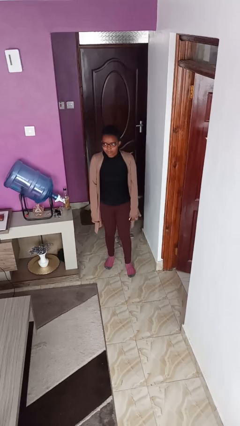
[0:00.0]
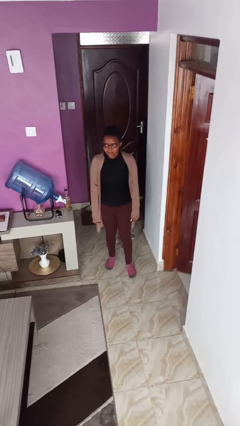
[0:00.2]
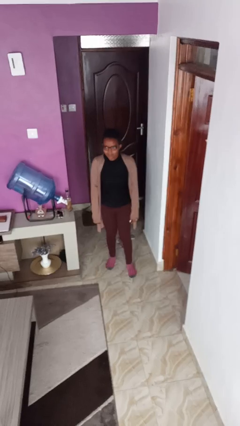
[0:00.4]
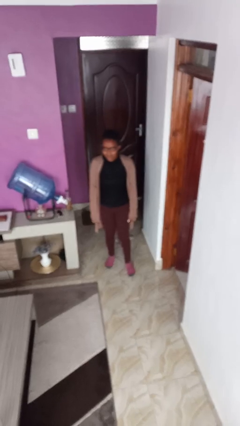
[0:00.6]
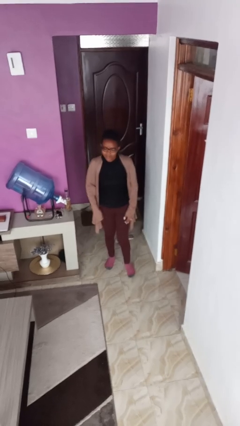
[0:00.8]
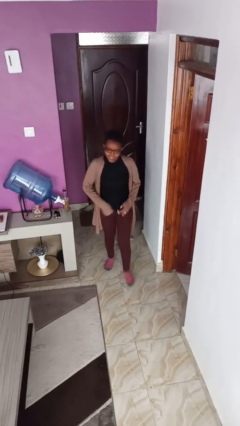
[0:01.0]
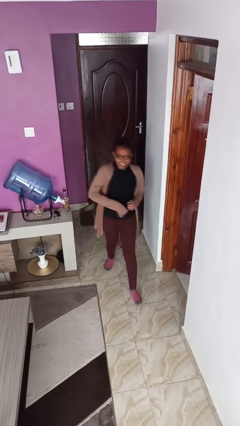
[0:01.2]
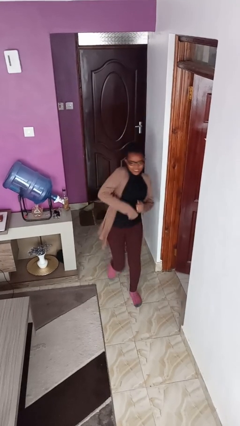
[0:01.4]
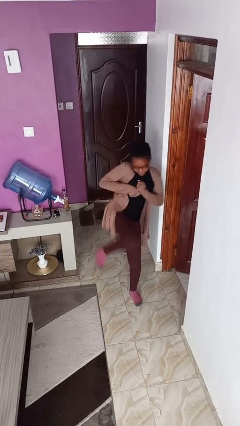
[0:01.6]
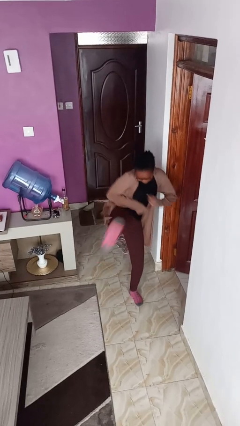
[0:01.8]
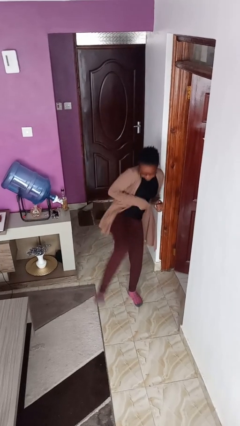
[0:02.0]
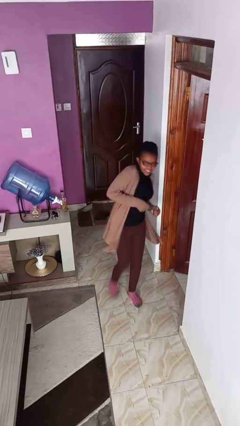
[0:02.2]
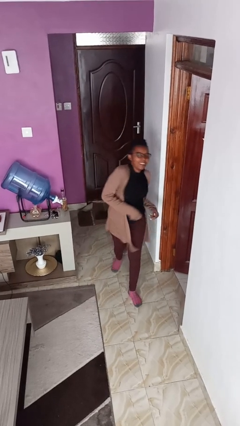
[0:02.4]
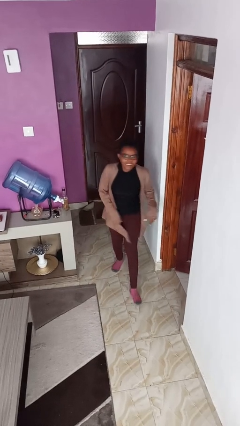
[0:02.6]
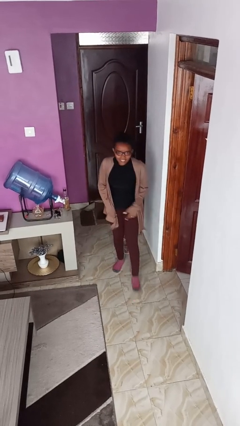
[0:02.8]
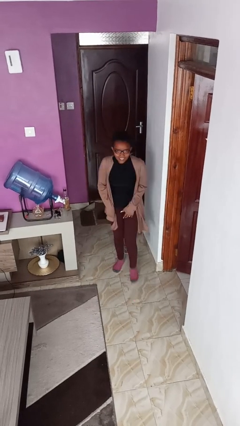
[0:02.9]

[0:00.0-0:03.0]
person karate kicks

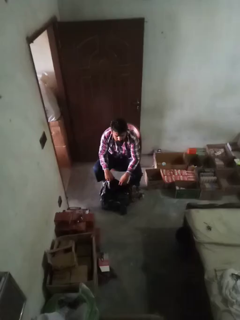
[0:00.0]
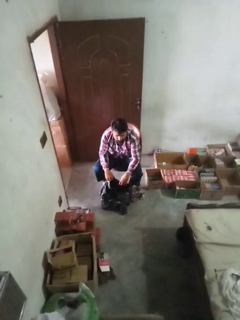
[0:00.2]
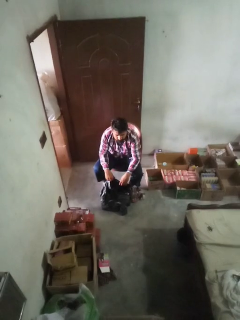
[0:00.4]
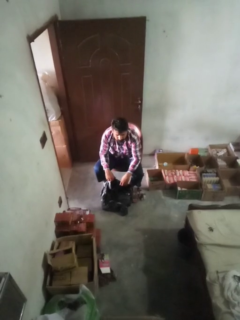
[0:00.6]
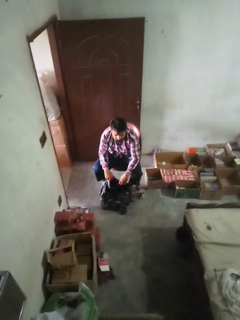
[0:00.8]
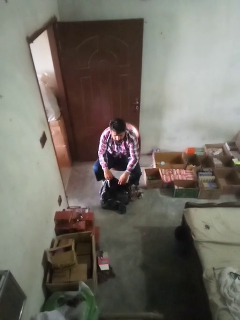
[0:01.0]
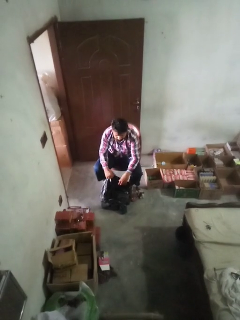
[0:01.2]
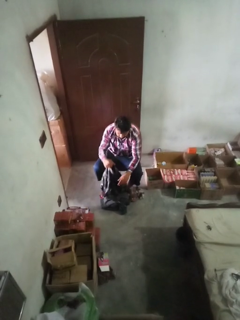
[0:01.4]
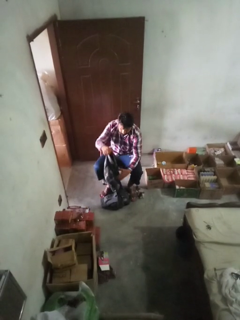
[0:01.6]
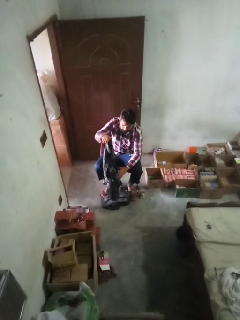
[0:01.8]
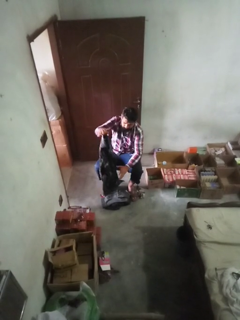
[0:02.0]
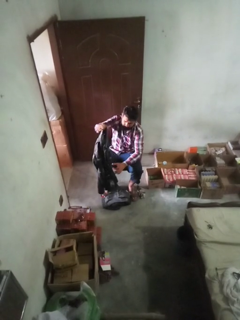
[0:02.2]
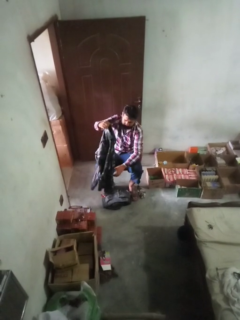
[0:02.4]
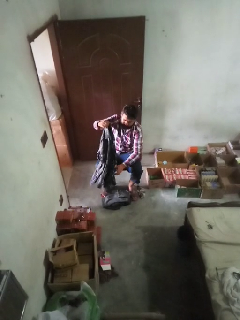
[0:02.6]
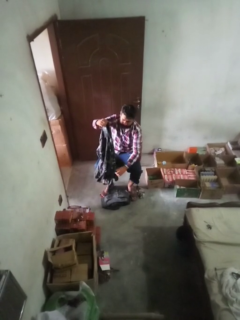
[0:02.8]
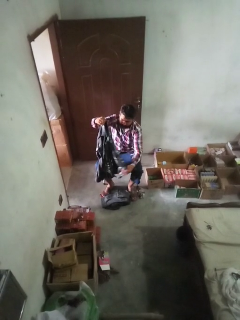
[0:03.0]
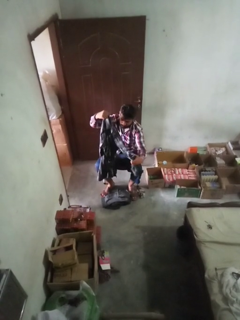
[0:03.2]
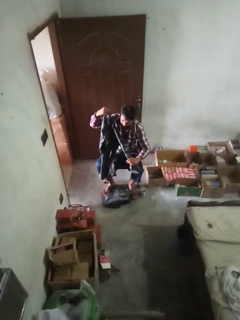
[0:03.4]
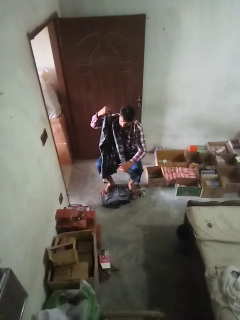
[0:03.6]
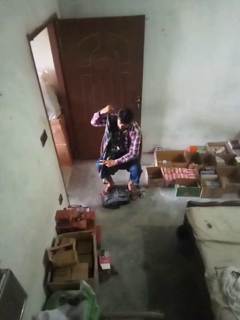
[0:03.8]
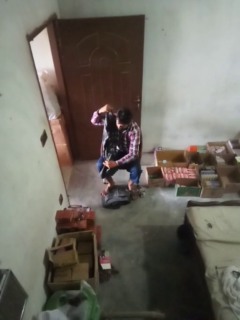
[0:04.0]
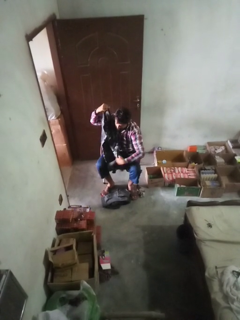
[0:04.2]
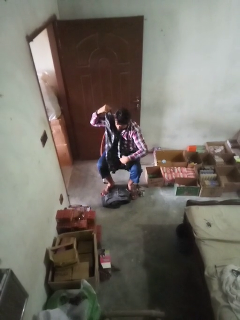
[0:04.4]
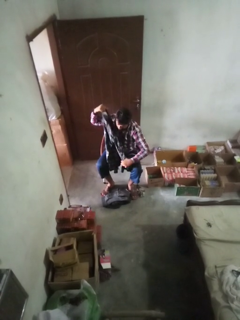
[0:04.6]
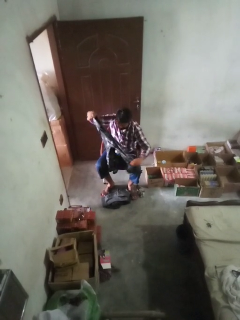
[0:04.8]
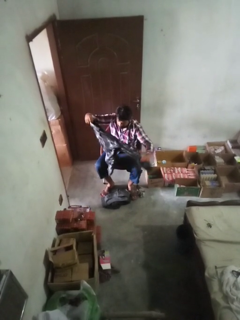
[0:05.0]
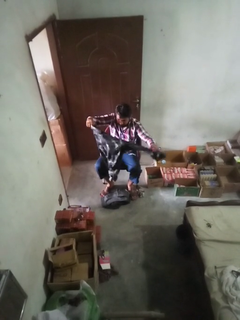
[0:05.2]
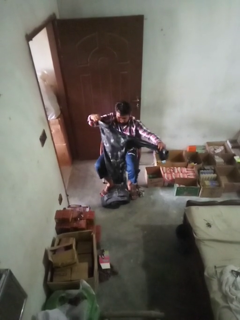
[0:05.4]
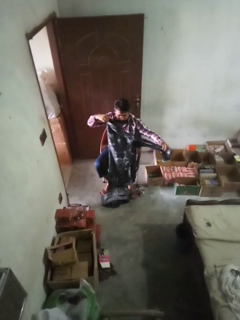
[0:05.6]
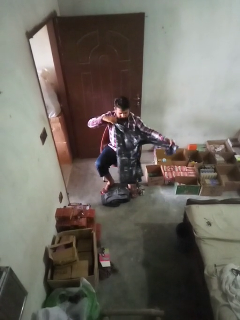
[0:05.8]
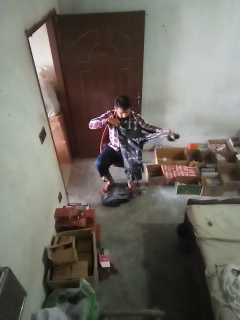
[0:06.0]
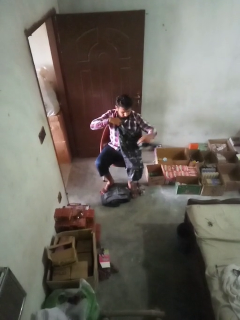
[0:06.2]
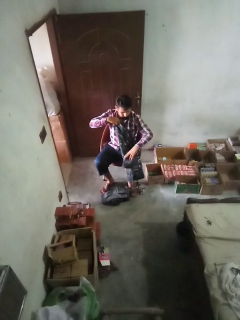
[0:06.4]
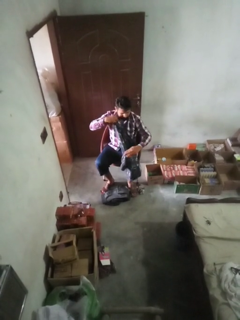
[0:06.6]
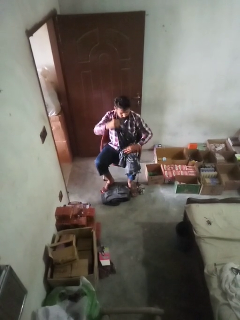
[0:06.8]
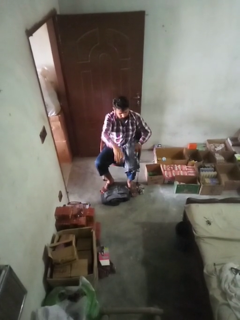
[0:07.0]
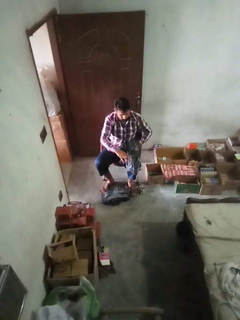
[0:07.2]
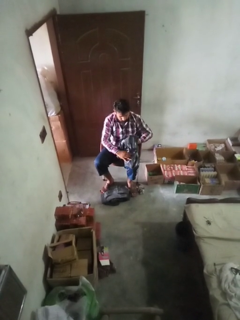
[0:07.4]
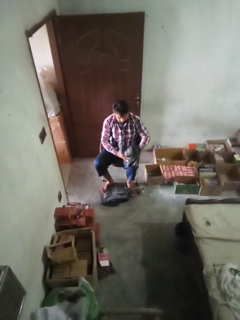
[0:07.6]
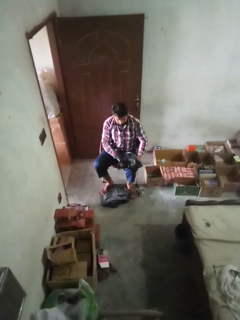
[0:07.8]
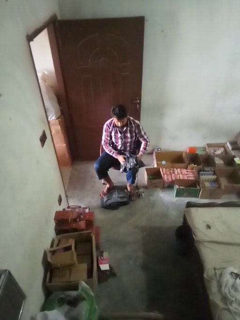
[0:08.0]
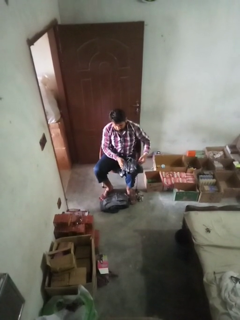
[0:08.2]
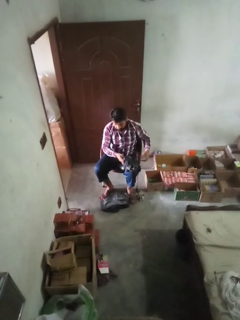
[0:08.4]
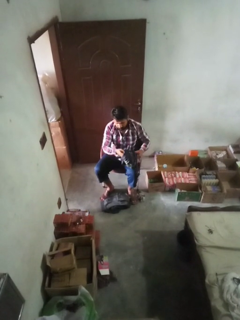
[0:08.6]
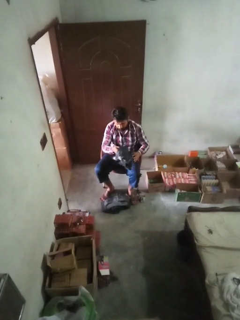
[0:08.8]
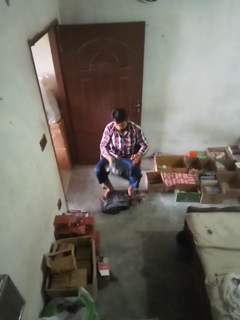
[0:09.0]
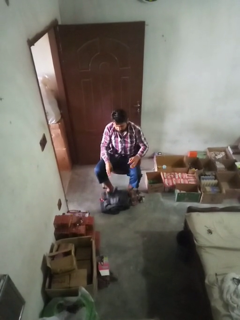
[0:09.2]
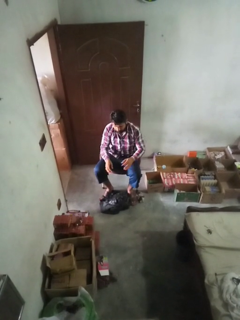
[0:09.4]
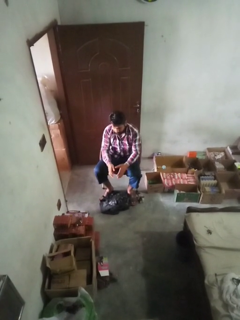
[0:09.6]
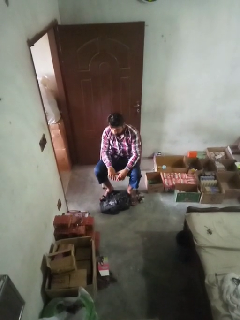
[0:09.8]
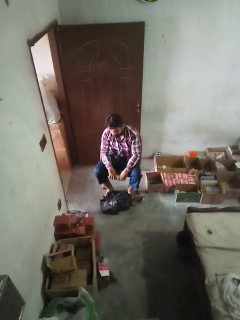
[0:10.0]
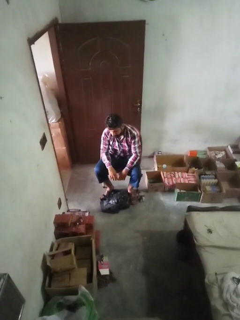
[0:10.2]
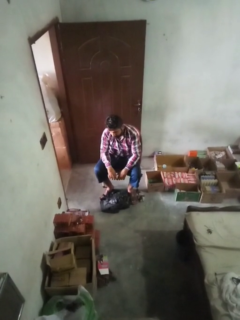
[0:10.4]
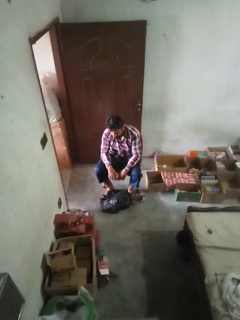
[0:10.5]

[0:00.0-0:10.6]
person folds shirt

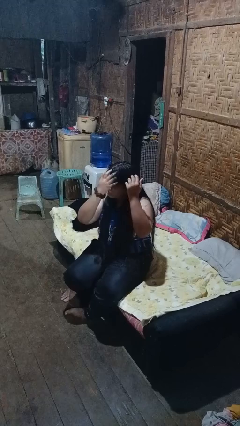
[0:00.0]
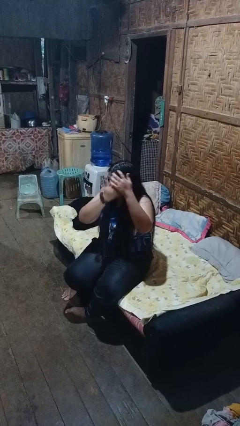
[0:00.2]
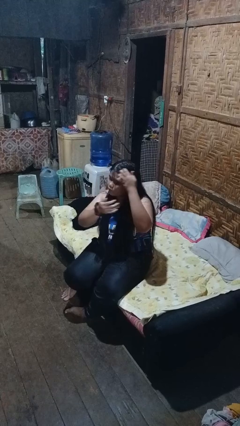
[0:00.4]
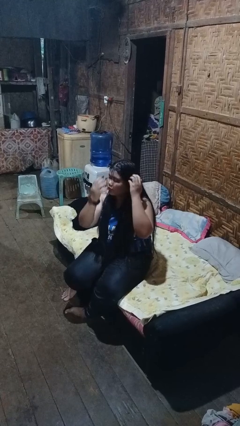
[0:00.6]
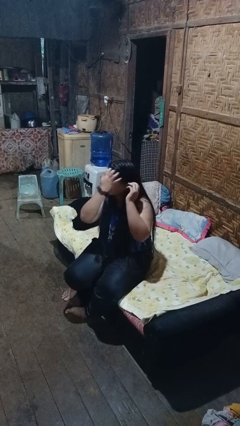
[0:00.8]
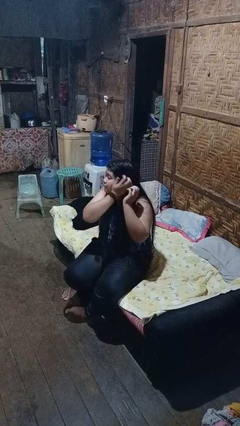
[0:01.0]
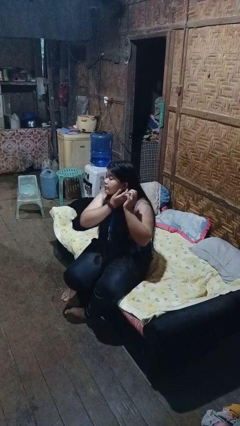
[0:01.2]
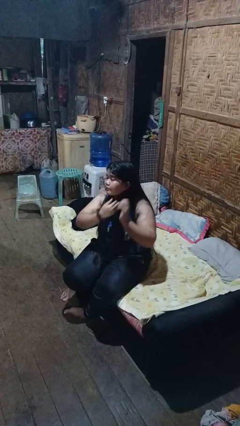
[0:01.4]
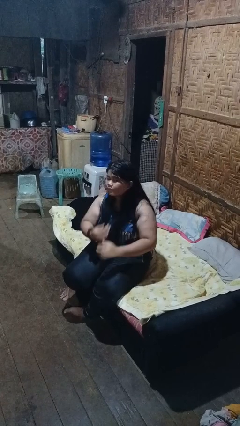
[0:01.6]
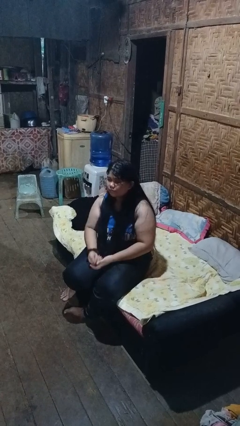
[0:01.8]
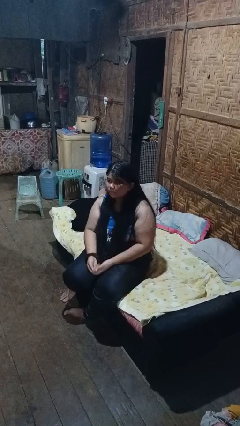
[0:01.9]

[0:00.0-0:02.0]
person strokes hair

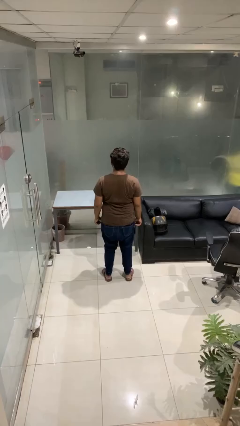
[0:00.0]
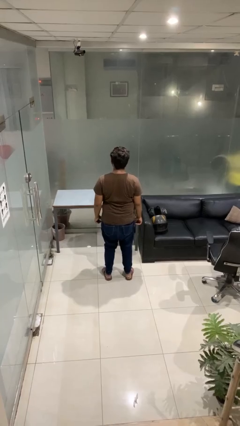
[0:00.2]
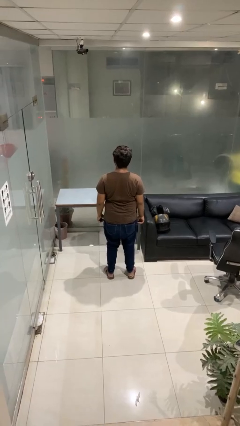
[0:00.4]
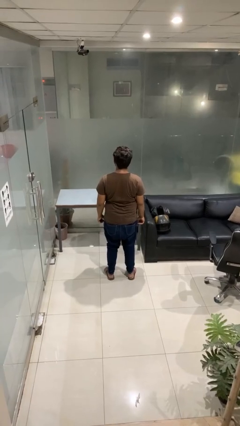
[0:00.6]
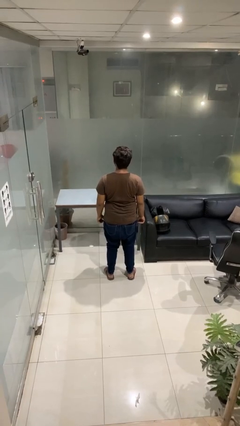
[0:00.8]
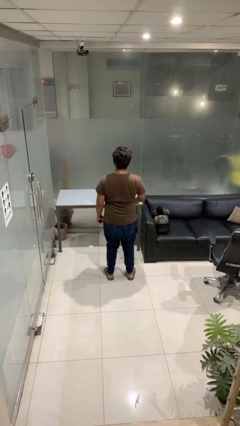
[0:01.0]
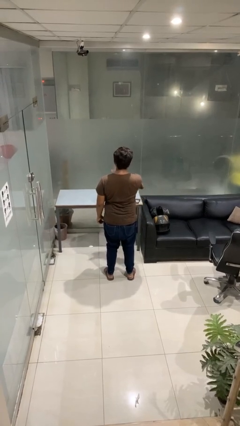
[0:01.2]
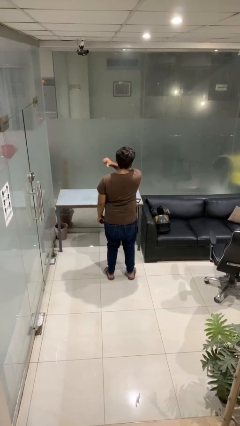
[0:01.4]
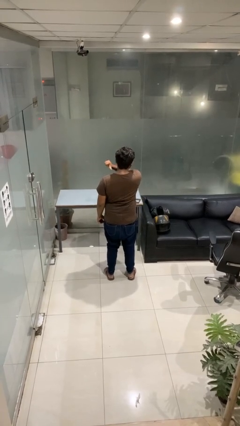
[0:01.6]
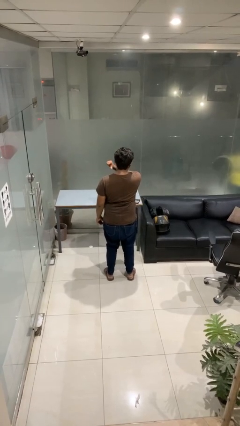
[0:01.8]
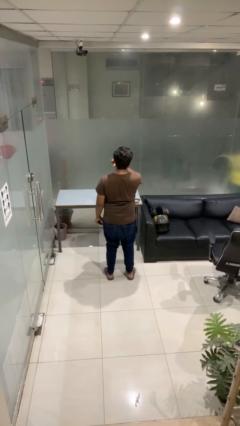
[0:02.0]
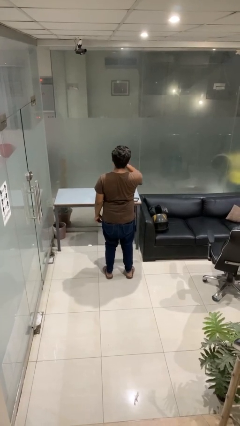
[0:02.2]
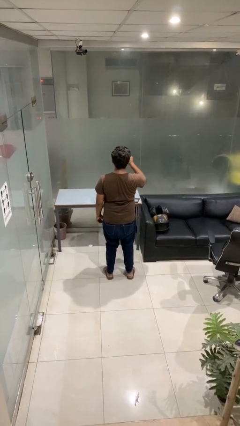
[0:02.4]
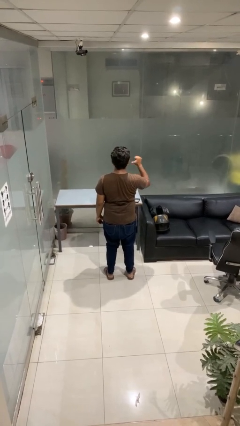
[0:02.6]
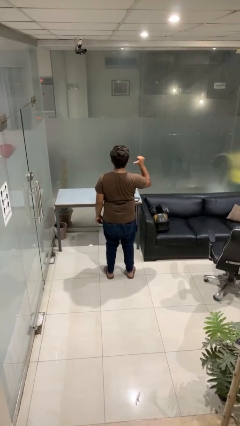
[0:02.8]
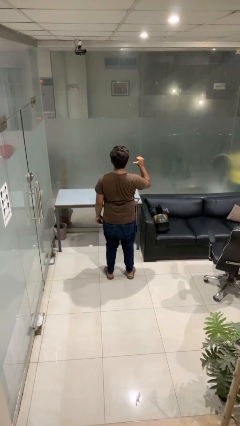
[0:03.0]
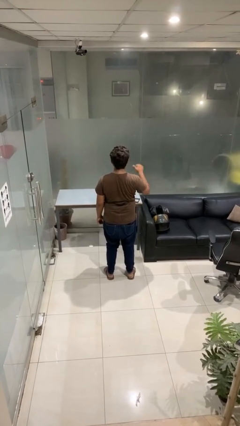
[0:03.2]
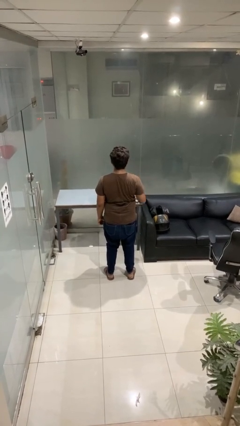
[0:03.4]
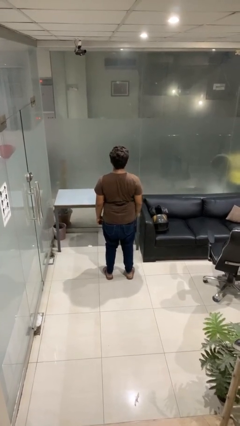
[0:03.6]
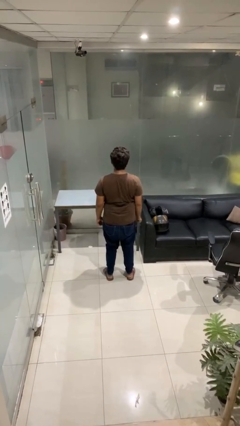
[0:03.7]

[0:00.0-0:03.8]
person gestures cut

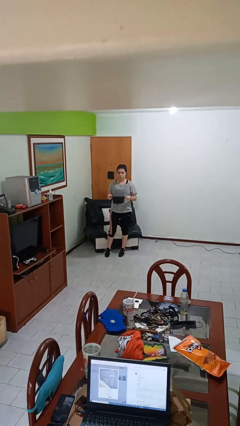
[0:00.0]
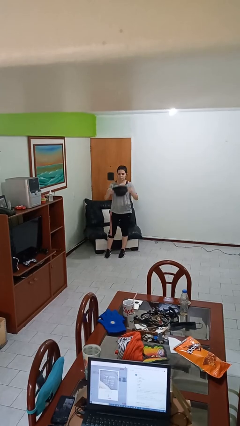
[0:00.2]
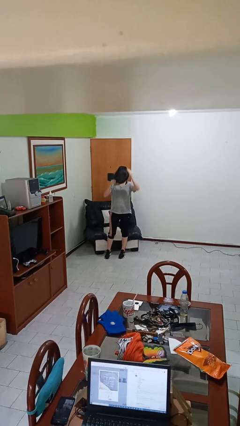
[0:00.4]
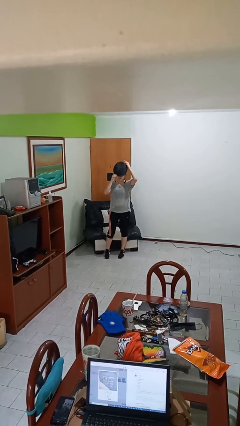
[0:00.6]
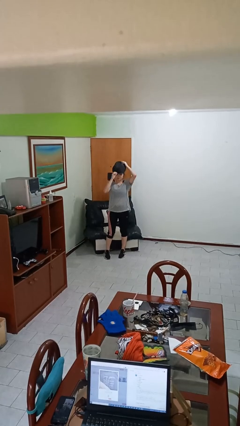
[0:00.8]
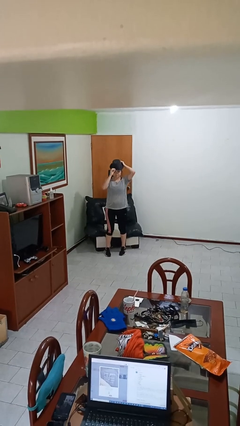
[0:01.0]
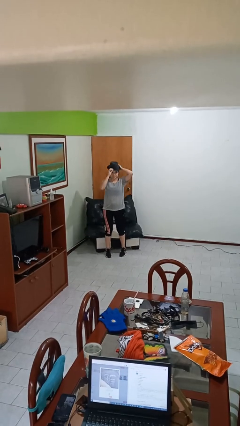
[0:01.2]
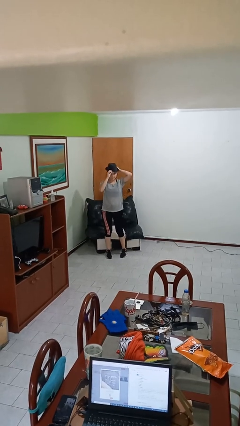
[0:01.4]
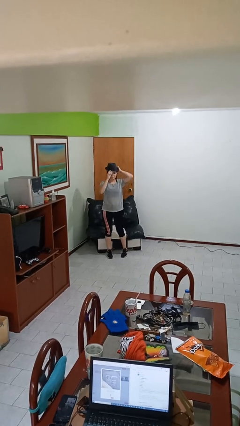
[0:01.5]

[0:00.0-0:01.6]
person puts on hat
